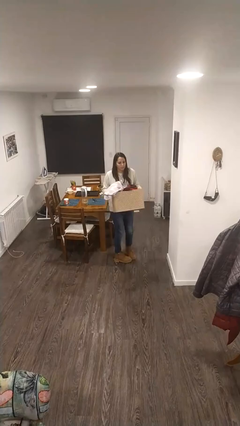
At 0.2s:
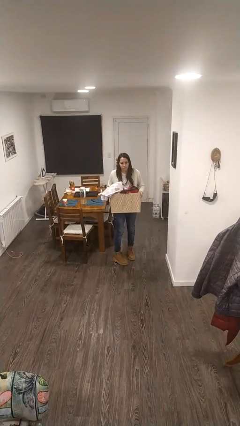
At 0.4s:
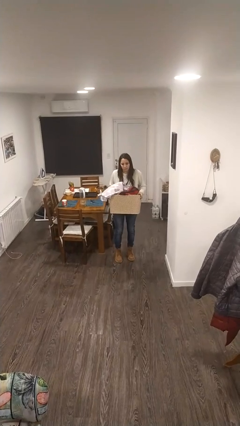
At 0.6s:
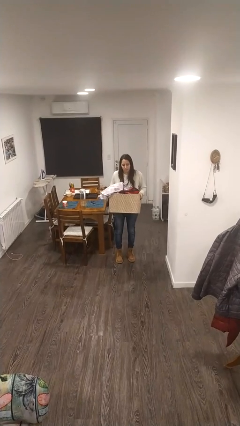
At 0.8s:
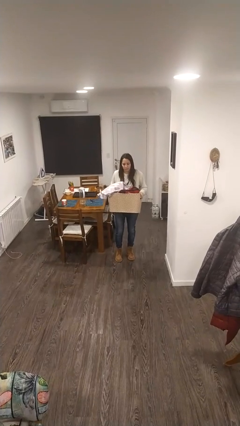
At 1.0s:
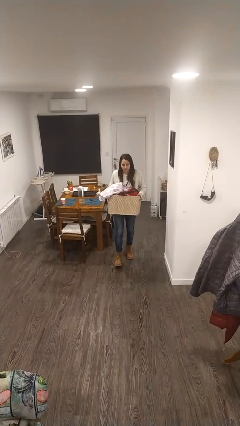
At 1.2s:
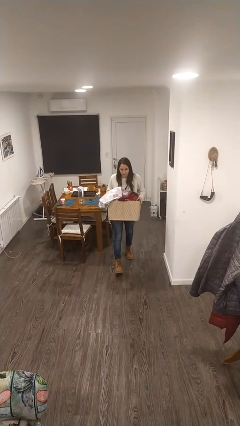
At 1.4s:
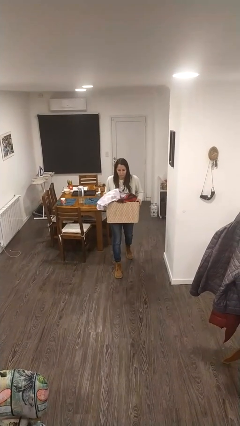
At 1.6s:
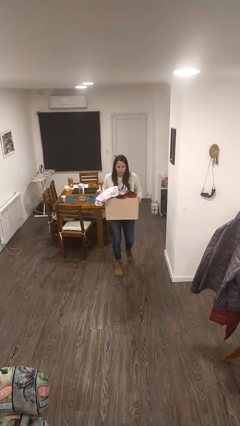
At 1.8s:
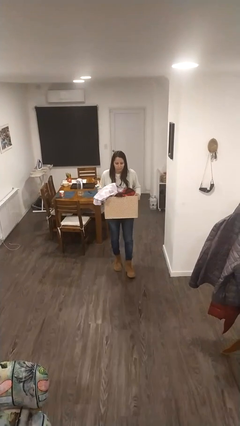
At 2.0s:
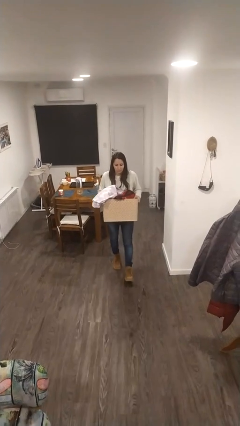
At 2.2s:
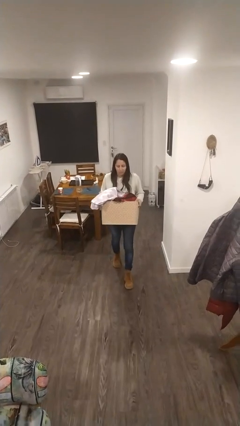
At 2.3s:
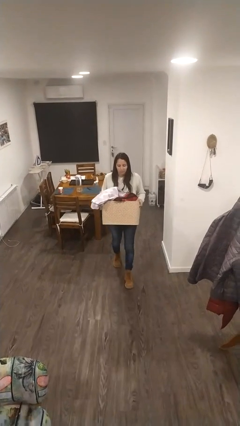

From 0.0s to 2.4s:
person carries laundry basket

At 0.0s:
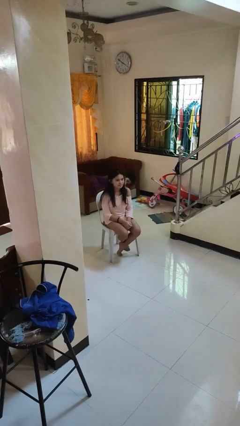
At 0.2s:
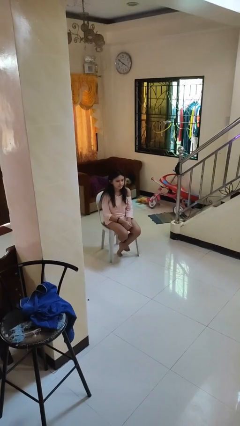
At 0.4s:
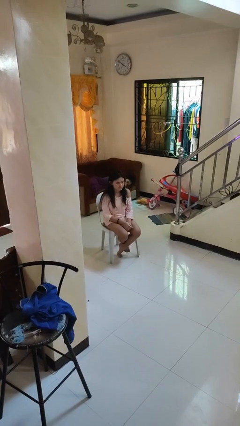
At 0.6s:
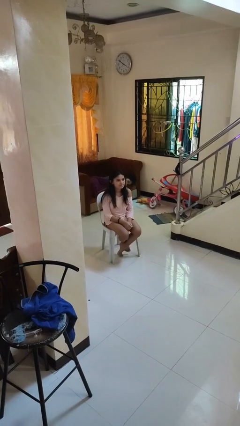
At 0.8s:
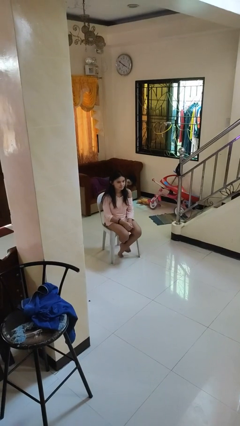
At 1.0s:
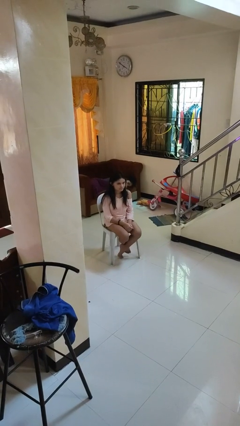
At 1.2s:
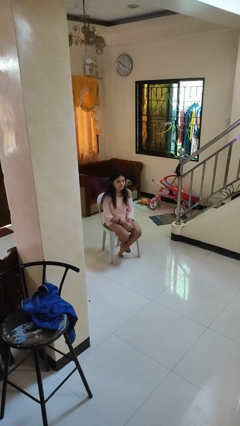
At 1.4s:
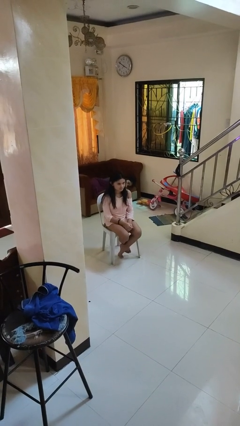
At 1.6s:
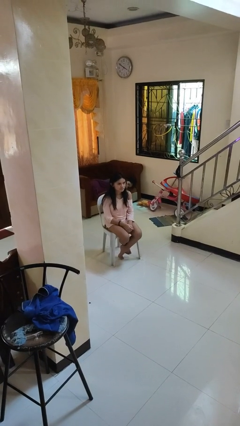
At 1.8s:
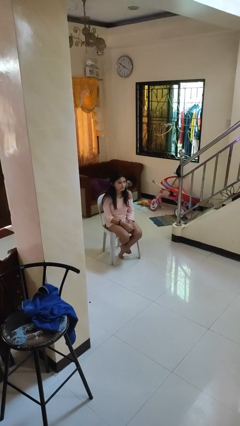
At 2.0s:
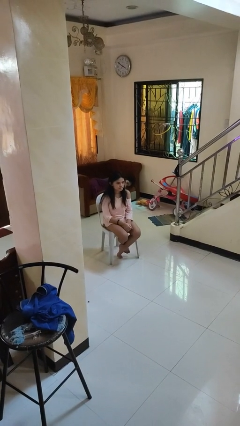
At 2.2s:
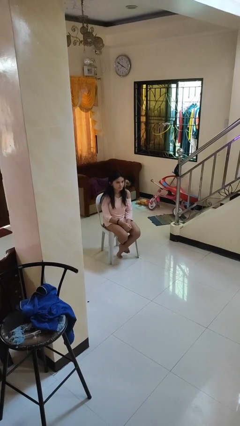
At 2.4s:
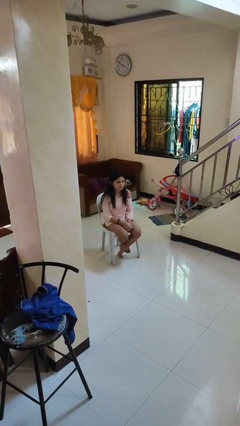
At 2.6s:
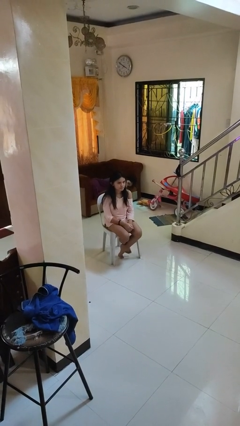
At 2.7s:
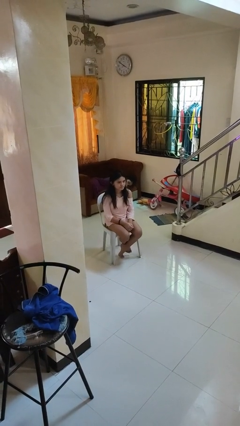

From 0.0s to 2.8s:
person nods head

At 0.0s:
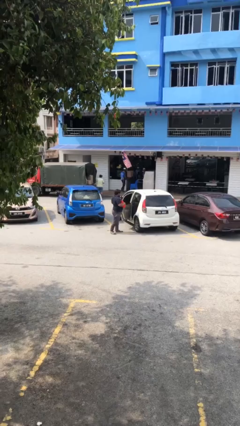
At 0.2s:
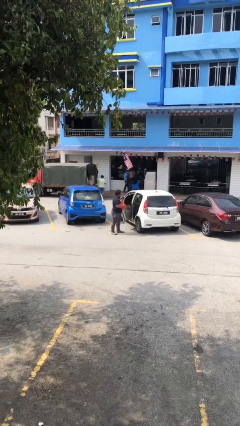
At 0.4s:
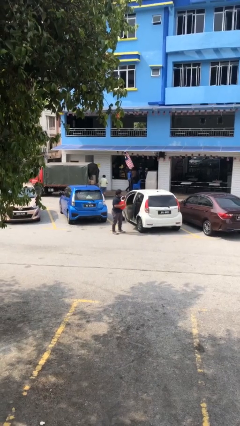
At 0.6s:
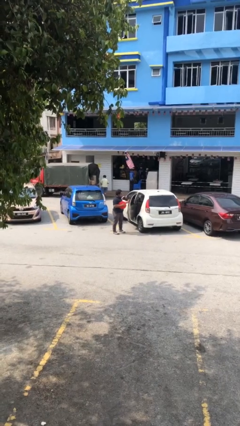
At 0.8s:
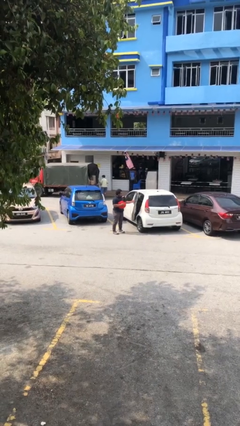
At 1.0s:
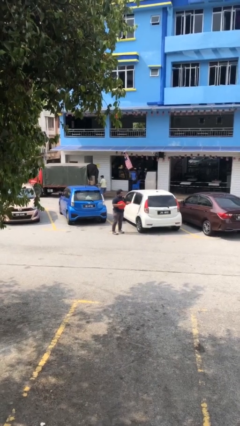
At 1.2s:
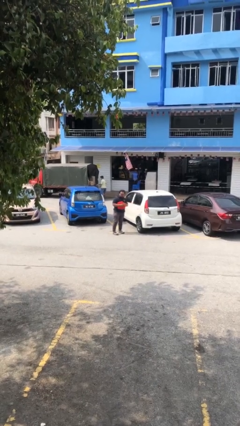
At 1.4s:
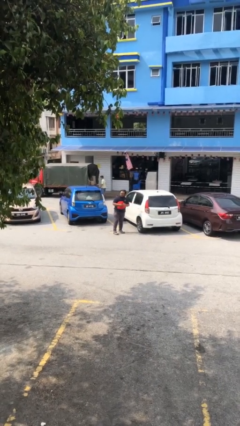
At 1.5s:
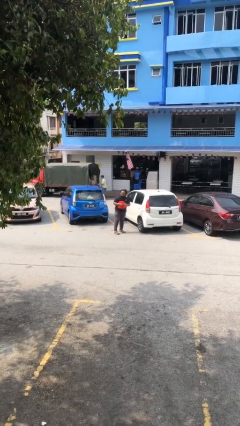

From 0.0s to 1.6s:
person closes car door

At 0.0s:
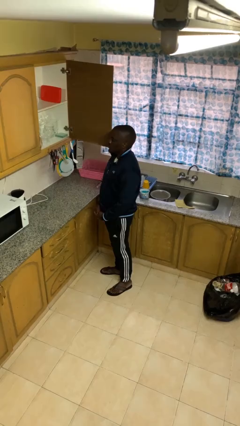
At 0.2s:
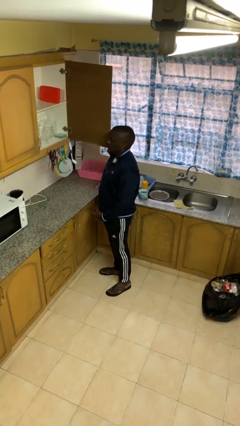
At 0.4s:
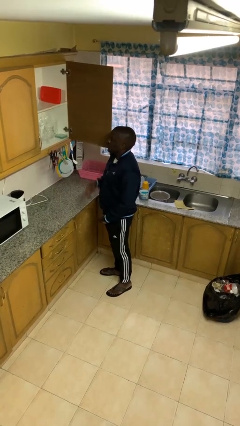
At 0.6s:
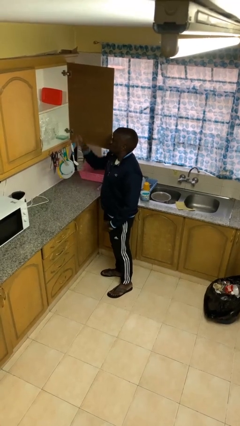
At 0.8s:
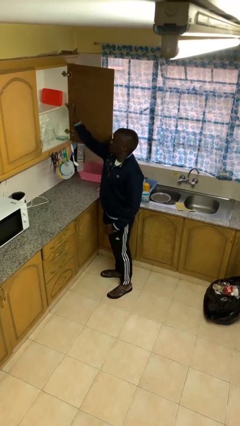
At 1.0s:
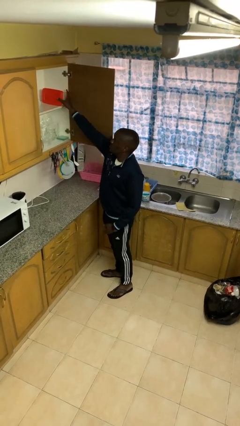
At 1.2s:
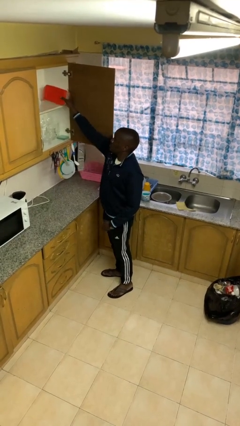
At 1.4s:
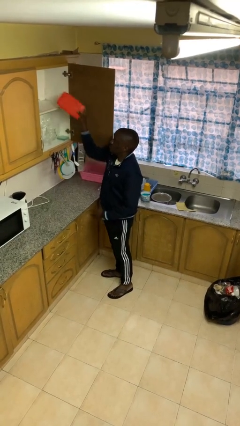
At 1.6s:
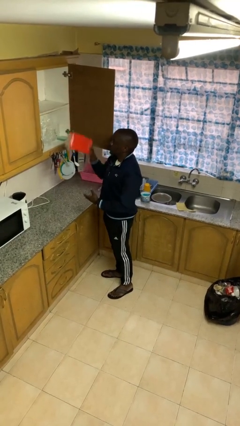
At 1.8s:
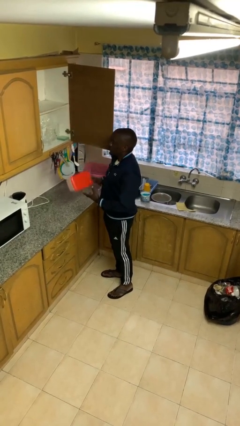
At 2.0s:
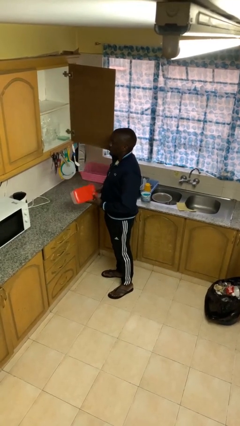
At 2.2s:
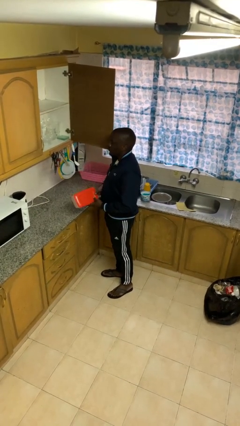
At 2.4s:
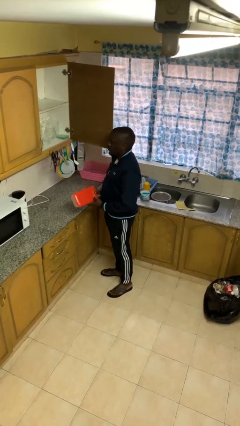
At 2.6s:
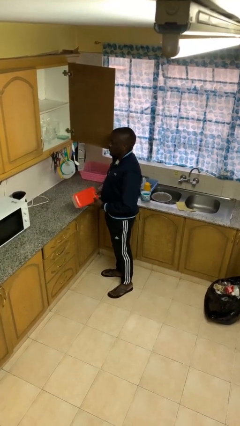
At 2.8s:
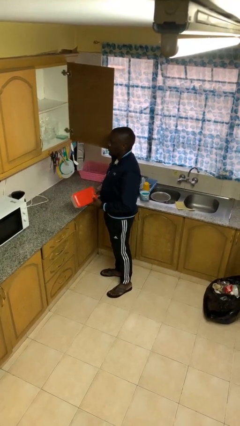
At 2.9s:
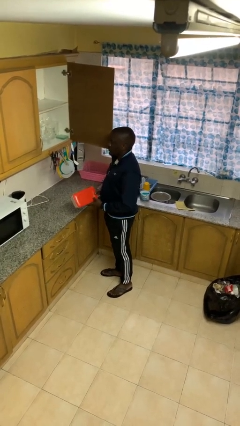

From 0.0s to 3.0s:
person picks up object from shelf

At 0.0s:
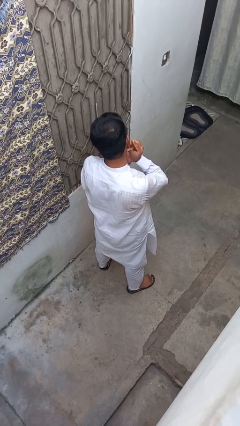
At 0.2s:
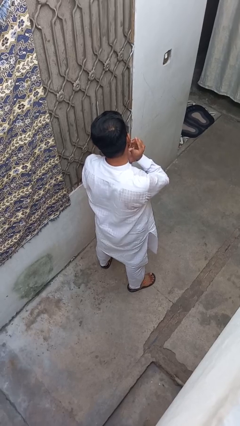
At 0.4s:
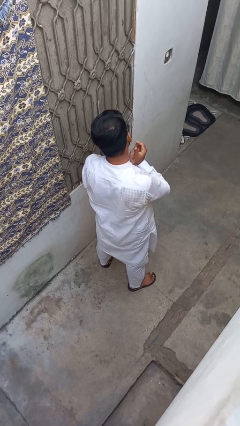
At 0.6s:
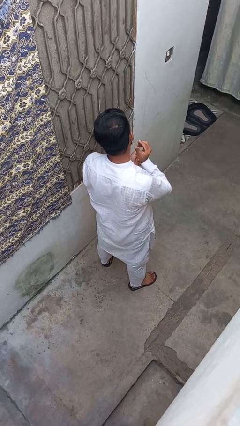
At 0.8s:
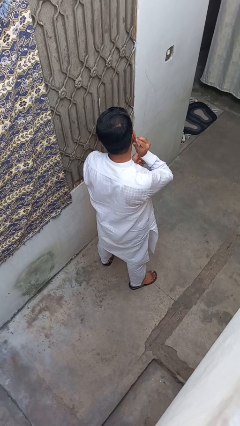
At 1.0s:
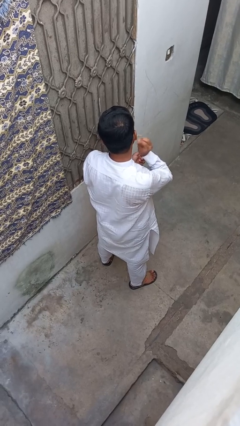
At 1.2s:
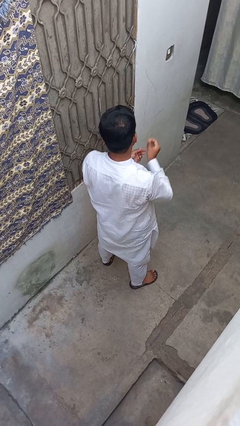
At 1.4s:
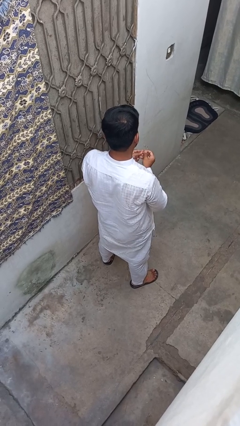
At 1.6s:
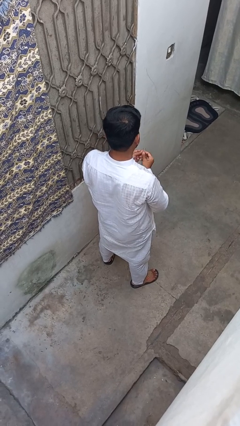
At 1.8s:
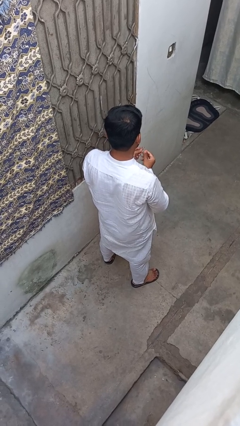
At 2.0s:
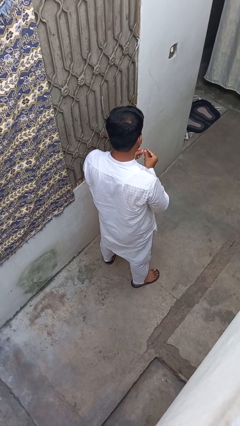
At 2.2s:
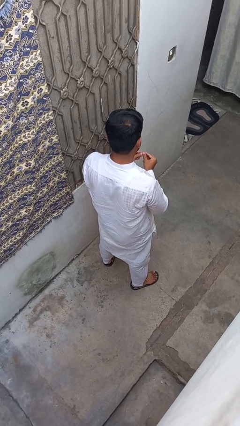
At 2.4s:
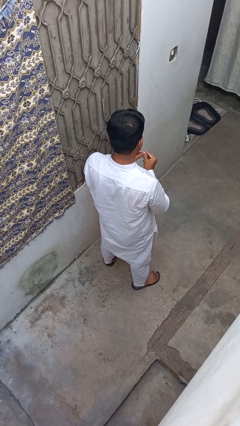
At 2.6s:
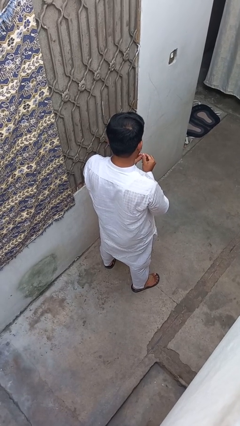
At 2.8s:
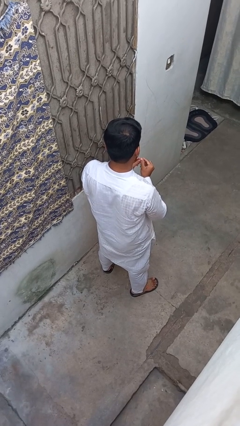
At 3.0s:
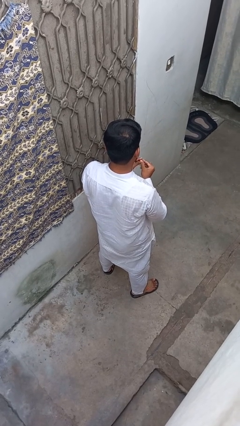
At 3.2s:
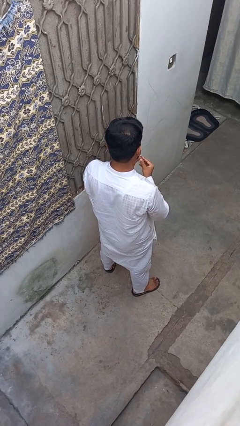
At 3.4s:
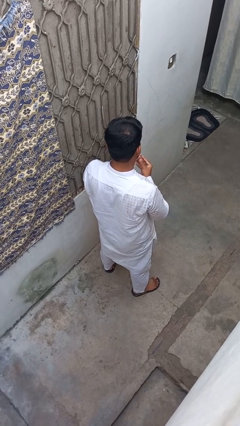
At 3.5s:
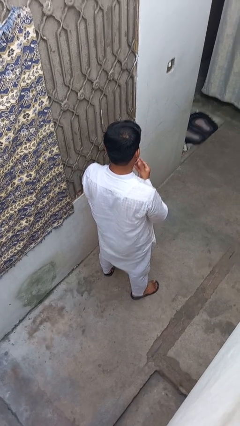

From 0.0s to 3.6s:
person takes off earrings

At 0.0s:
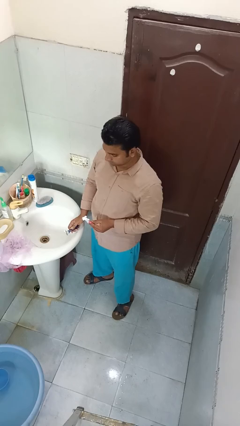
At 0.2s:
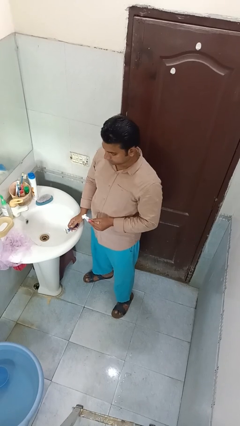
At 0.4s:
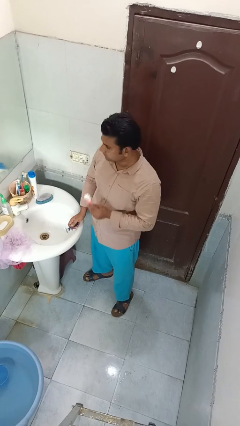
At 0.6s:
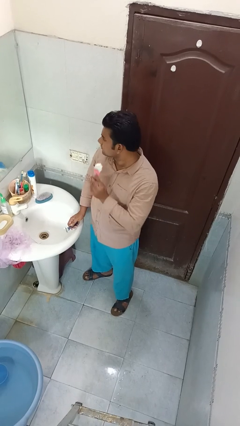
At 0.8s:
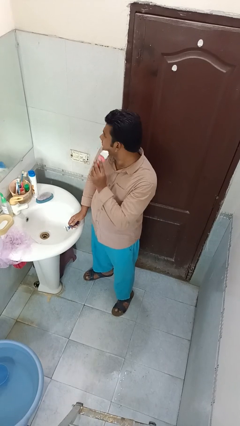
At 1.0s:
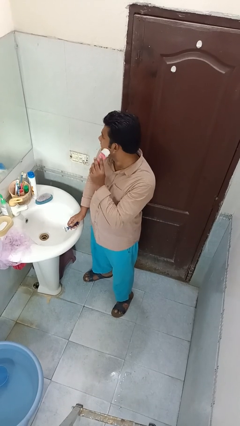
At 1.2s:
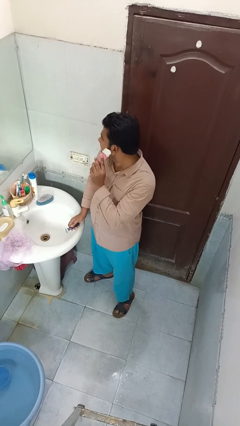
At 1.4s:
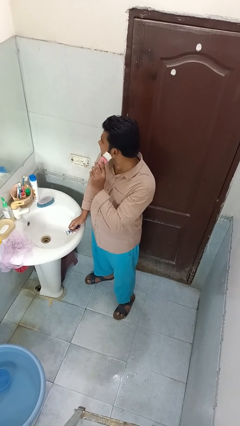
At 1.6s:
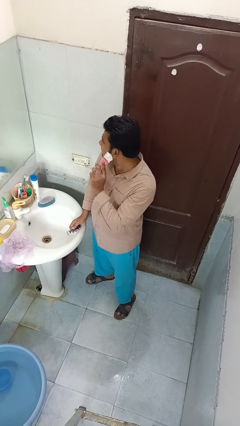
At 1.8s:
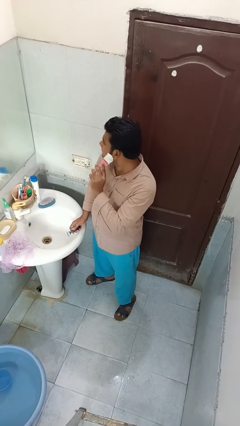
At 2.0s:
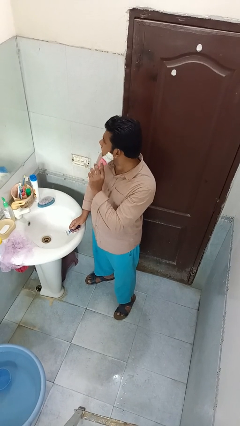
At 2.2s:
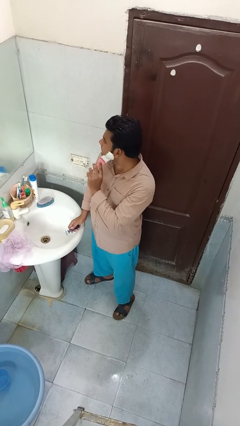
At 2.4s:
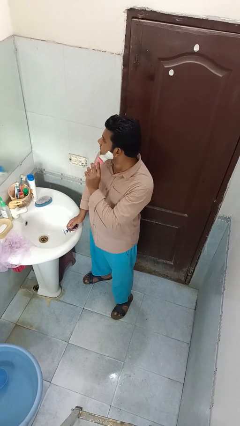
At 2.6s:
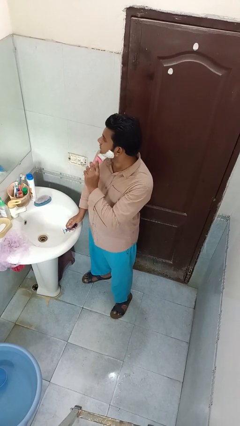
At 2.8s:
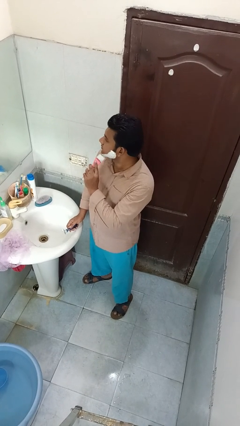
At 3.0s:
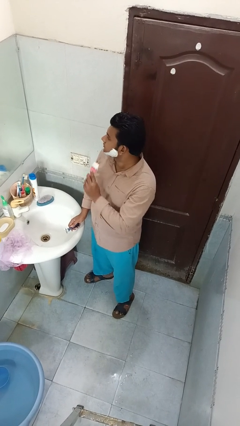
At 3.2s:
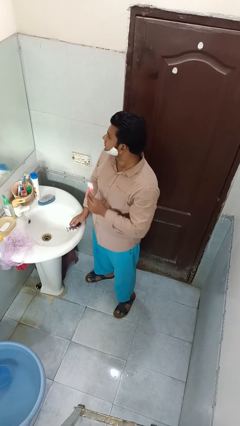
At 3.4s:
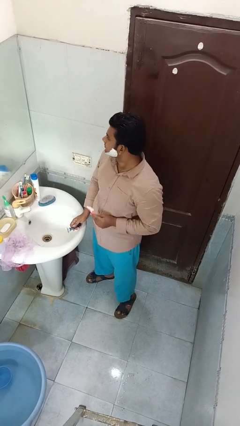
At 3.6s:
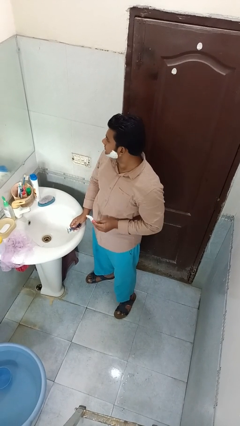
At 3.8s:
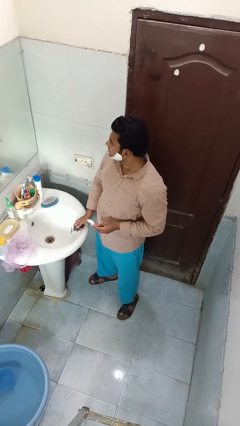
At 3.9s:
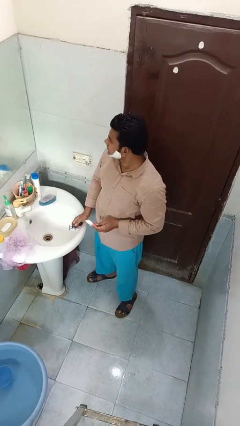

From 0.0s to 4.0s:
person applies shaving cream
